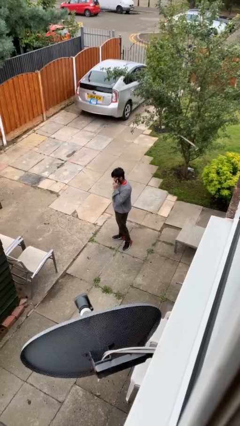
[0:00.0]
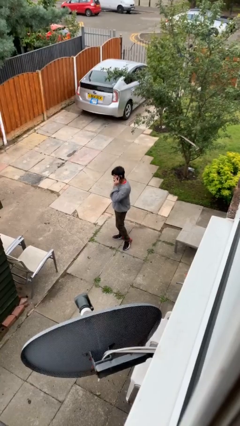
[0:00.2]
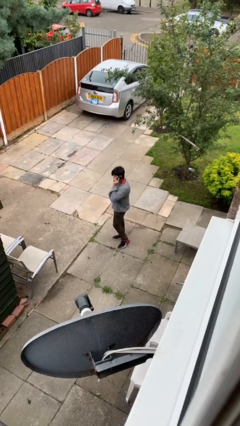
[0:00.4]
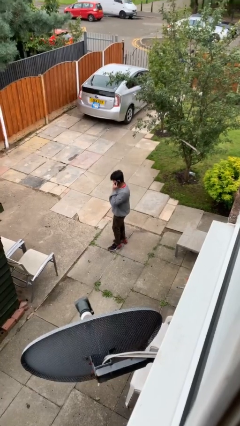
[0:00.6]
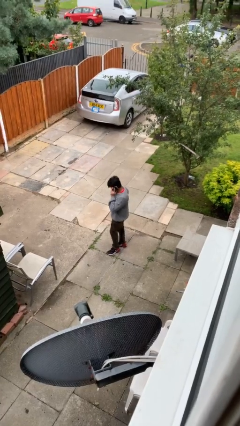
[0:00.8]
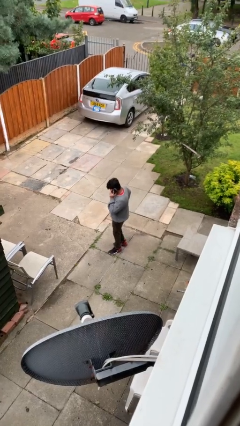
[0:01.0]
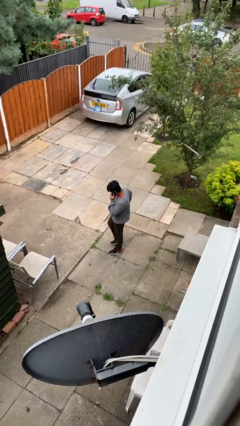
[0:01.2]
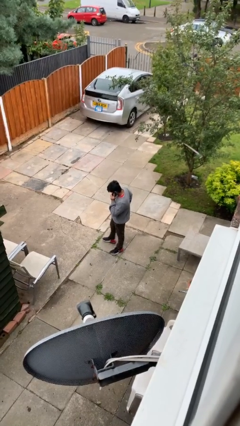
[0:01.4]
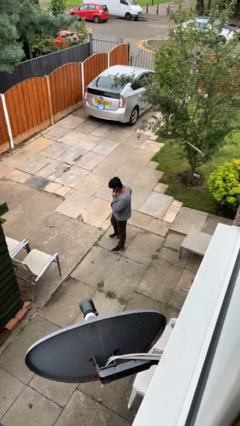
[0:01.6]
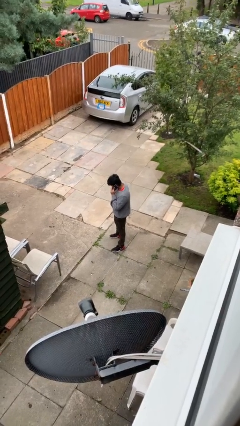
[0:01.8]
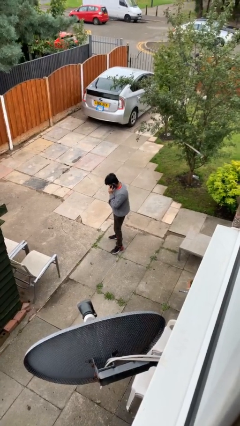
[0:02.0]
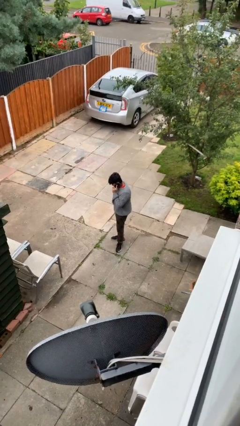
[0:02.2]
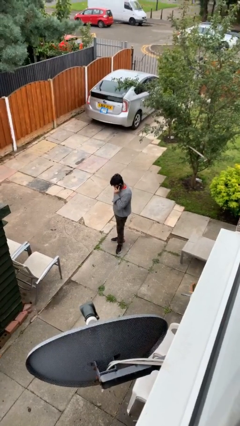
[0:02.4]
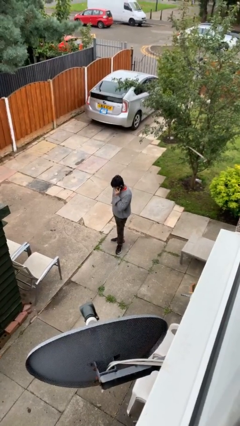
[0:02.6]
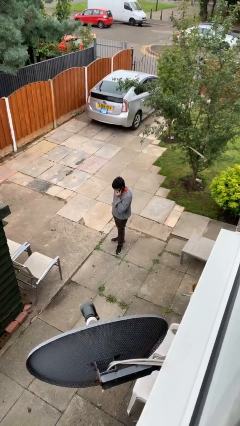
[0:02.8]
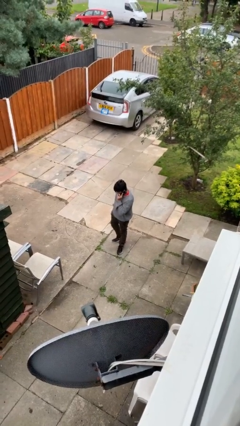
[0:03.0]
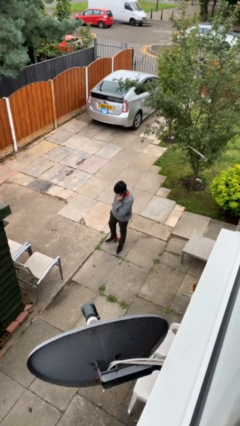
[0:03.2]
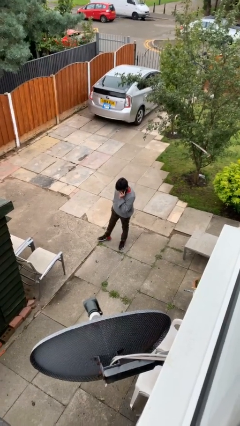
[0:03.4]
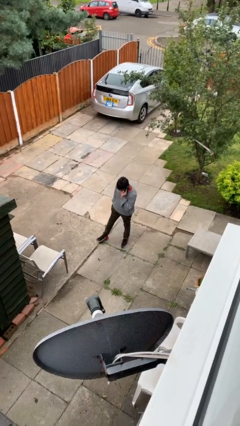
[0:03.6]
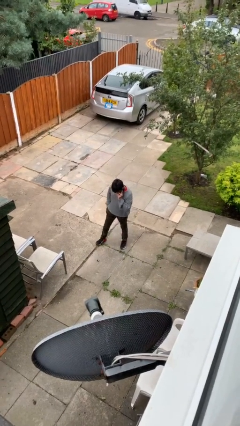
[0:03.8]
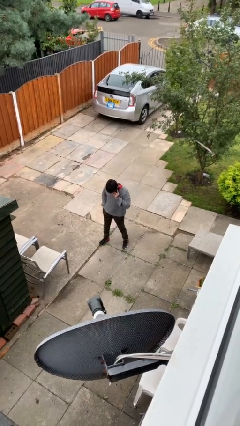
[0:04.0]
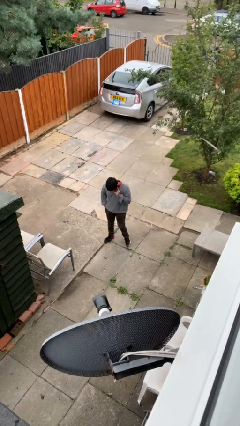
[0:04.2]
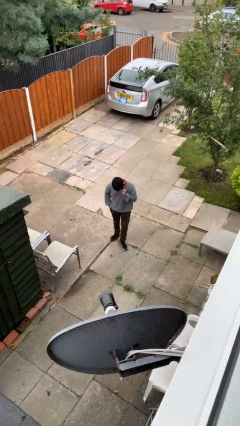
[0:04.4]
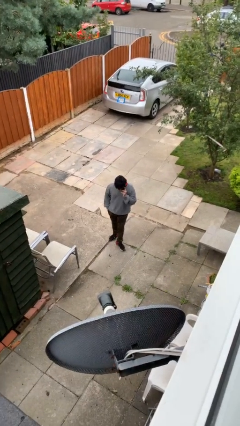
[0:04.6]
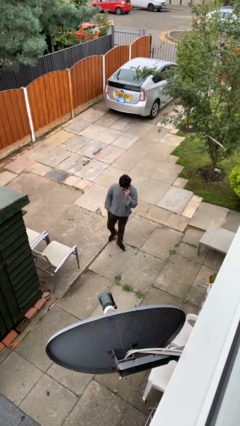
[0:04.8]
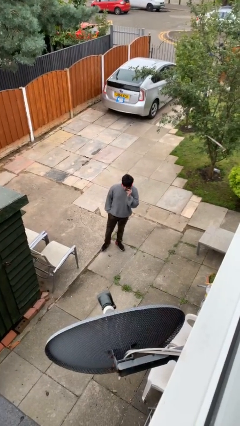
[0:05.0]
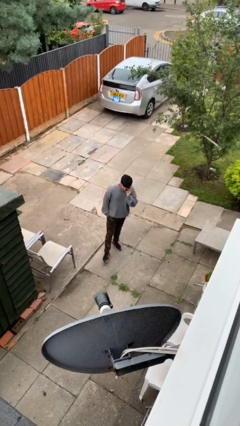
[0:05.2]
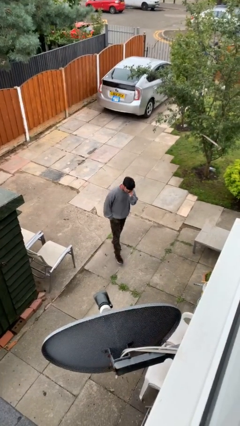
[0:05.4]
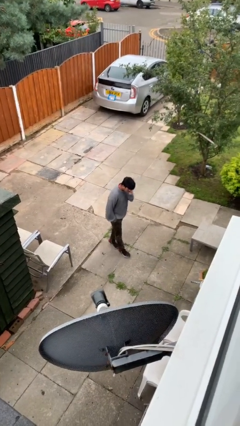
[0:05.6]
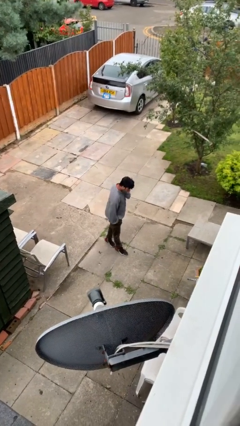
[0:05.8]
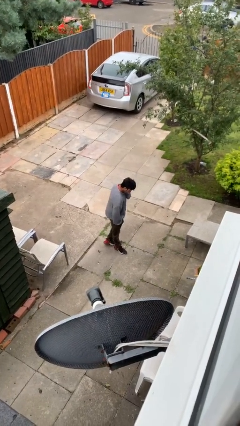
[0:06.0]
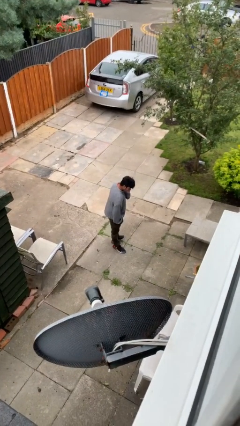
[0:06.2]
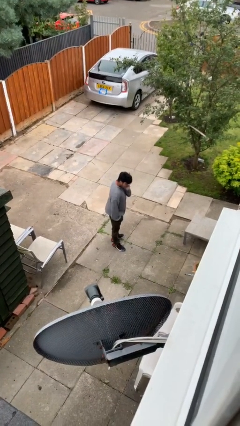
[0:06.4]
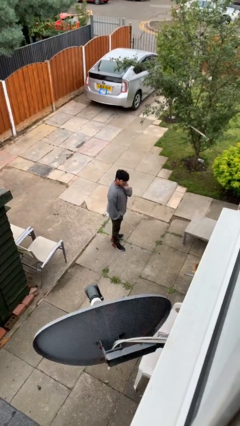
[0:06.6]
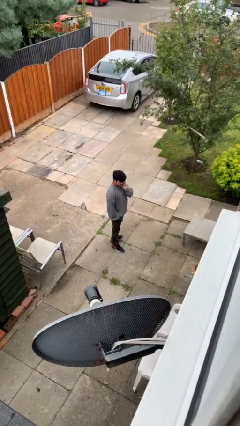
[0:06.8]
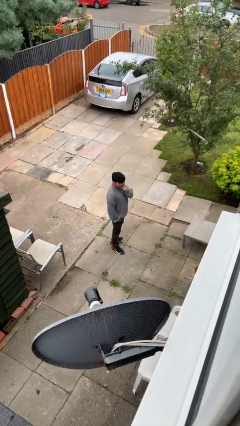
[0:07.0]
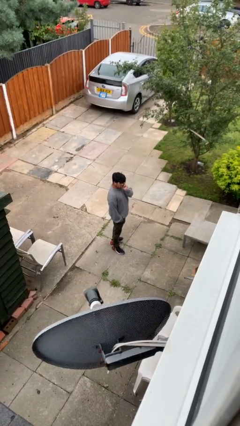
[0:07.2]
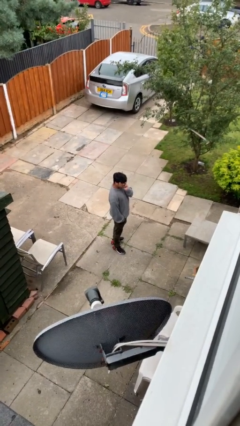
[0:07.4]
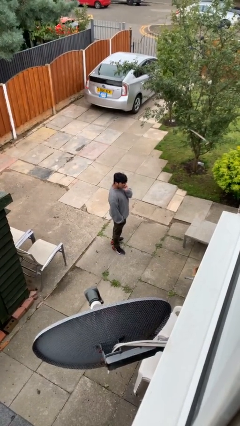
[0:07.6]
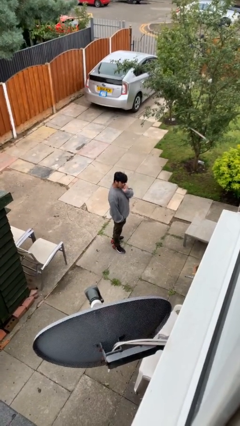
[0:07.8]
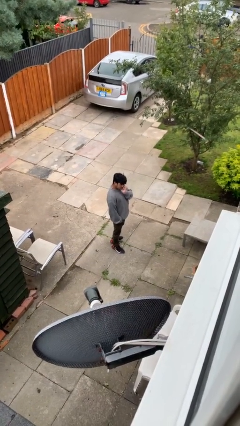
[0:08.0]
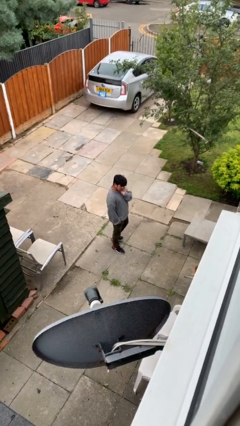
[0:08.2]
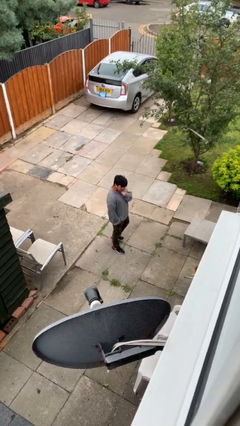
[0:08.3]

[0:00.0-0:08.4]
person talks on phone

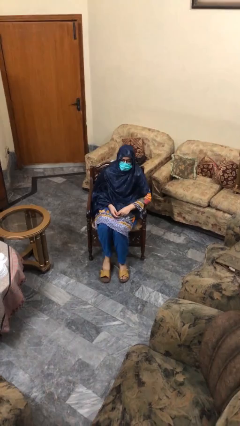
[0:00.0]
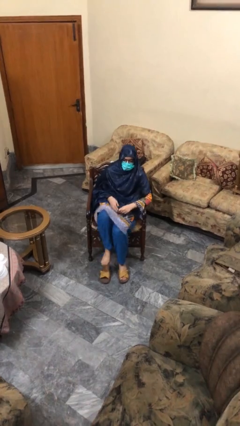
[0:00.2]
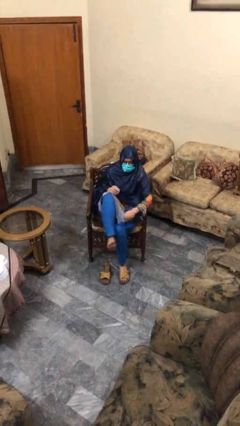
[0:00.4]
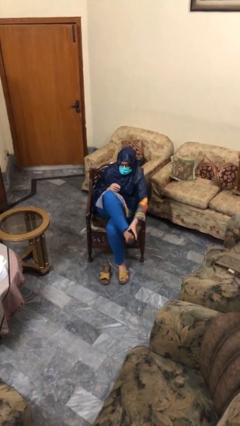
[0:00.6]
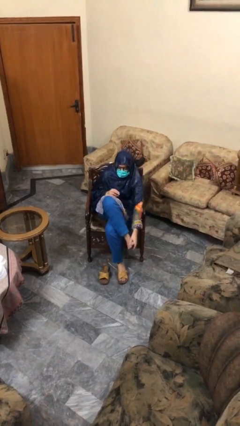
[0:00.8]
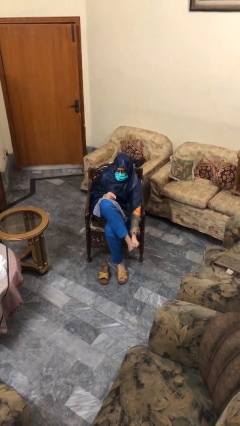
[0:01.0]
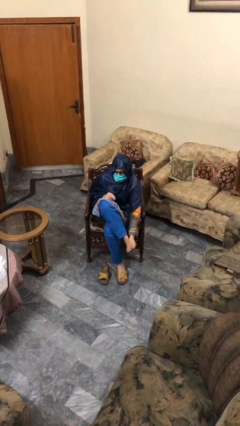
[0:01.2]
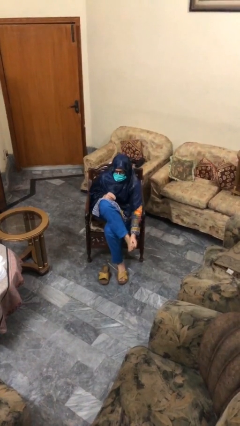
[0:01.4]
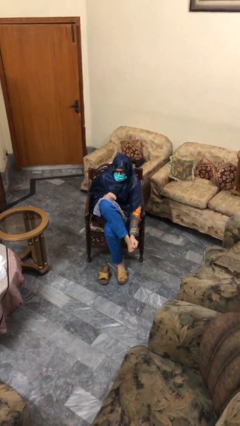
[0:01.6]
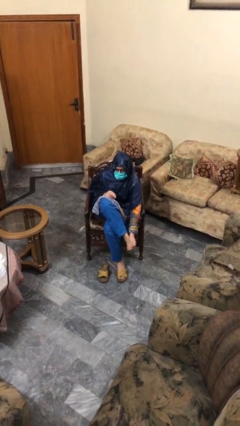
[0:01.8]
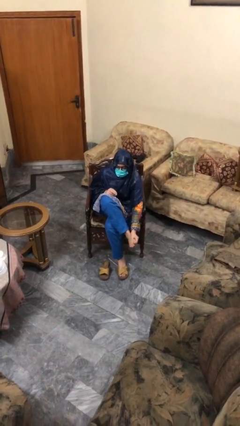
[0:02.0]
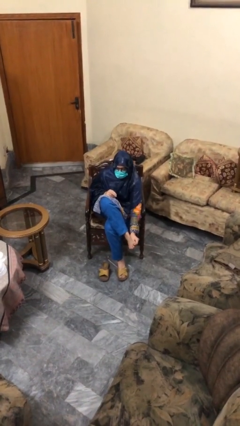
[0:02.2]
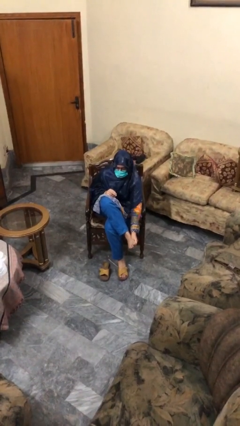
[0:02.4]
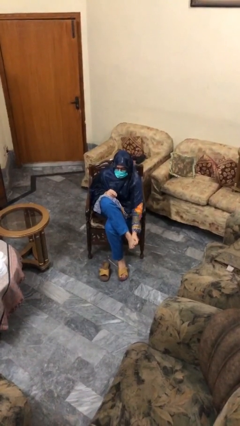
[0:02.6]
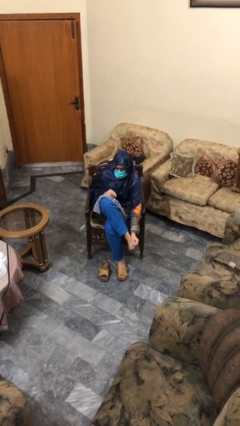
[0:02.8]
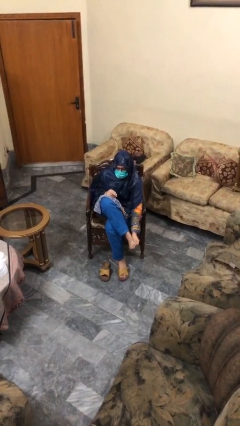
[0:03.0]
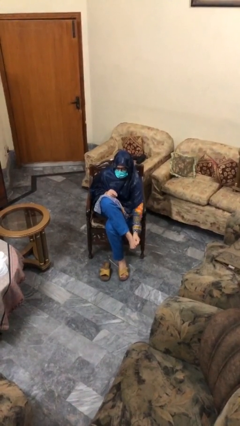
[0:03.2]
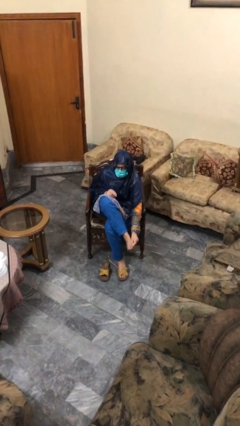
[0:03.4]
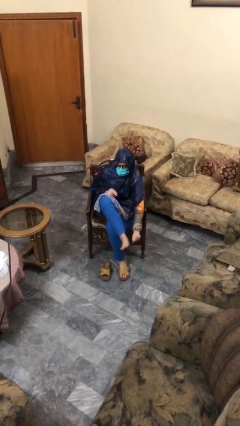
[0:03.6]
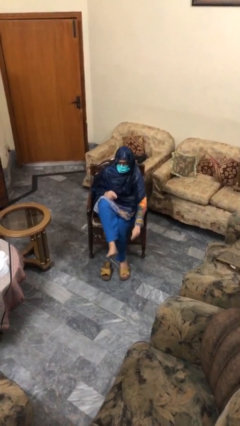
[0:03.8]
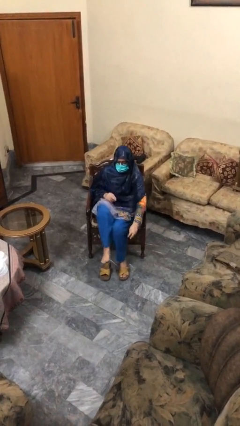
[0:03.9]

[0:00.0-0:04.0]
person rubs foot

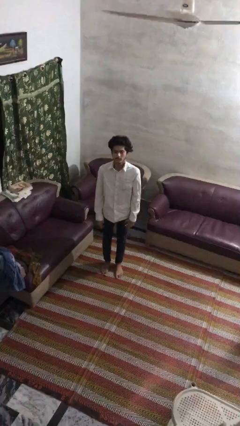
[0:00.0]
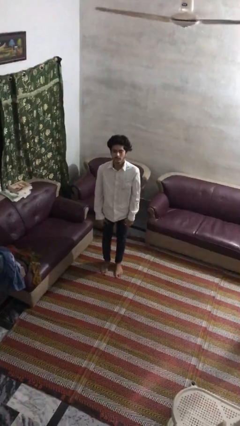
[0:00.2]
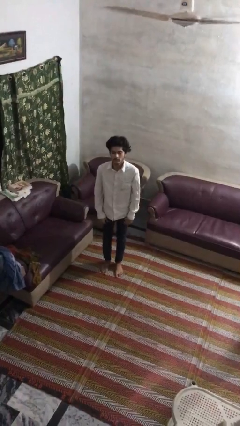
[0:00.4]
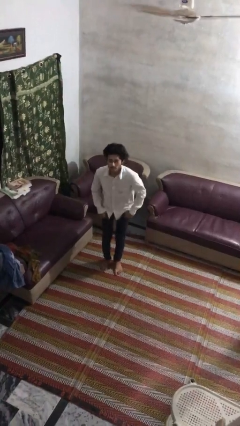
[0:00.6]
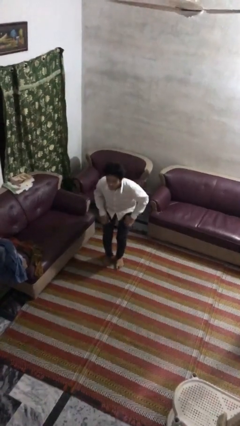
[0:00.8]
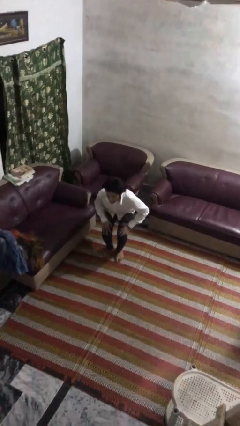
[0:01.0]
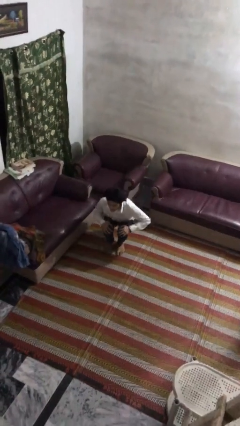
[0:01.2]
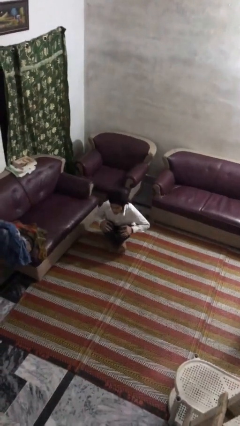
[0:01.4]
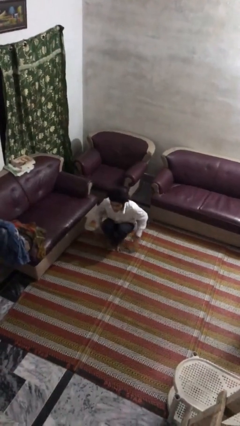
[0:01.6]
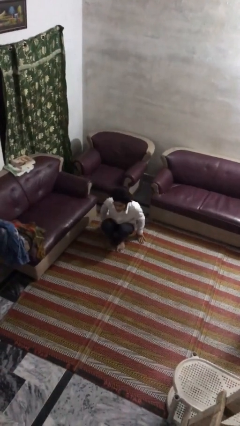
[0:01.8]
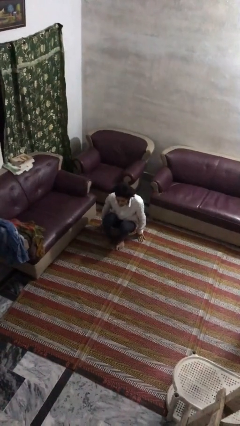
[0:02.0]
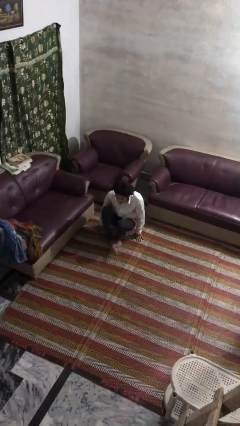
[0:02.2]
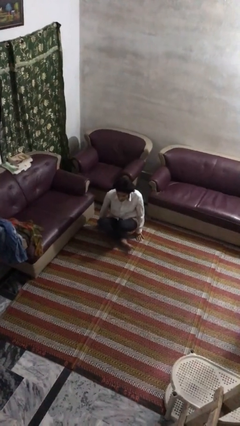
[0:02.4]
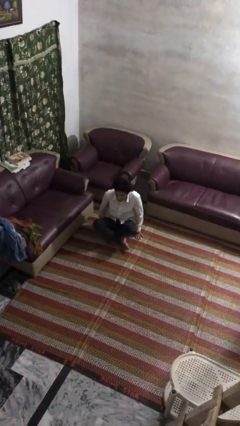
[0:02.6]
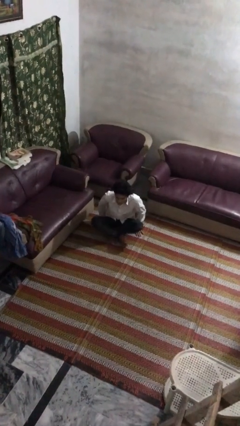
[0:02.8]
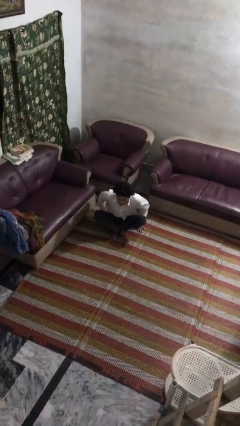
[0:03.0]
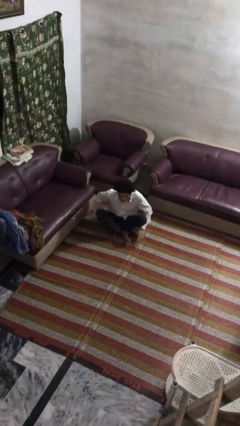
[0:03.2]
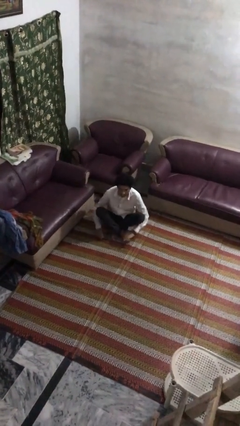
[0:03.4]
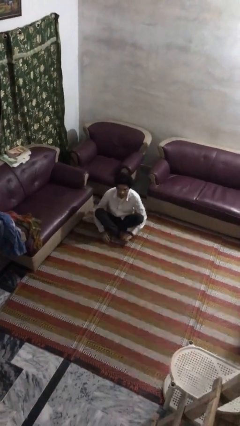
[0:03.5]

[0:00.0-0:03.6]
person sits crisscross

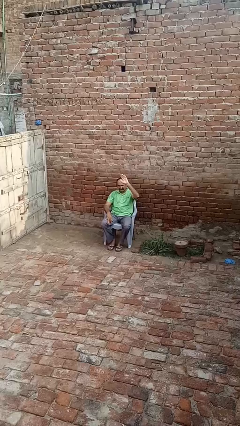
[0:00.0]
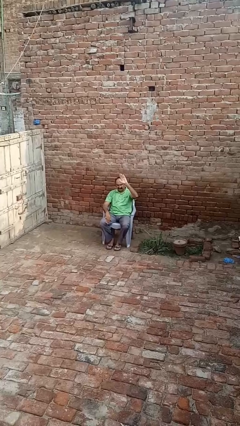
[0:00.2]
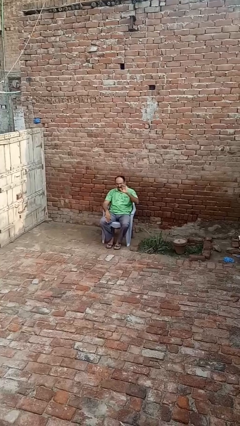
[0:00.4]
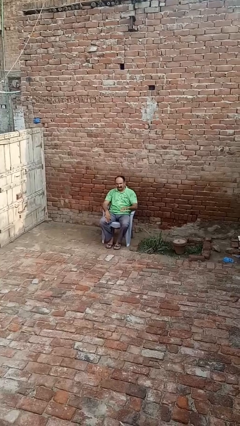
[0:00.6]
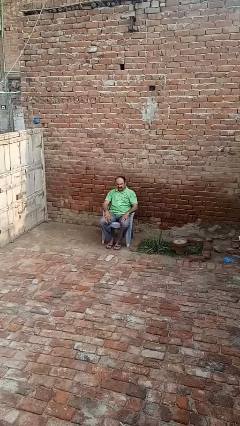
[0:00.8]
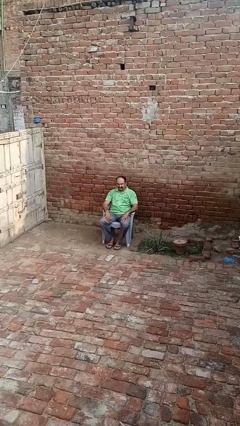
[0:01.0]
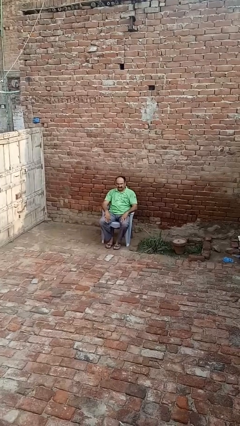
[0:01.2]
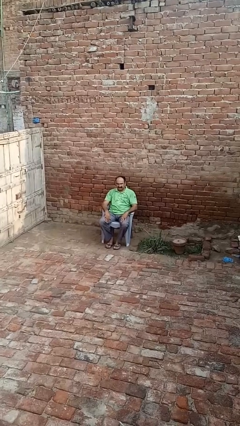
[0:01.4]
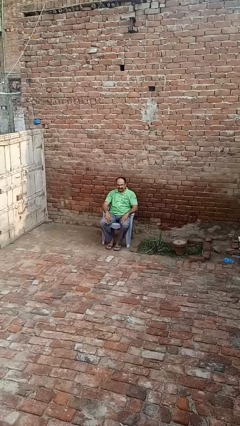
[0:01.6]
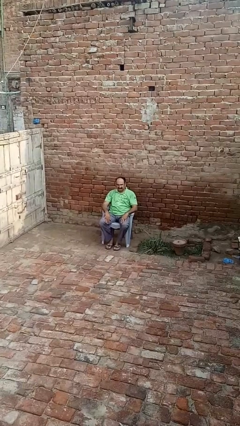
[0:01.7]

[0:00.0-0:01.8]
person gestures lower hand
